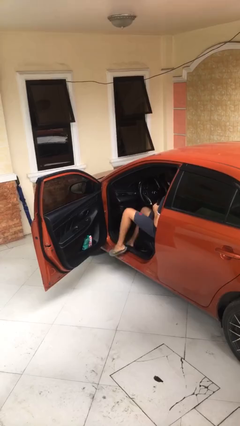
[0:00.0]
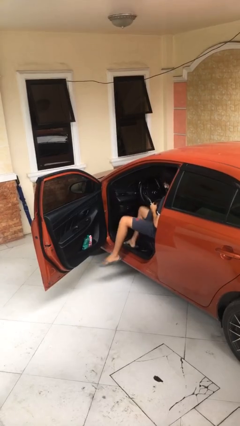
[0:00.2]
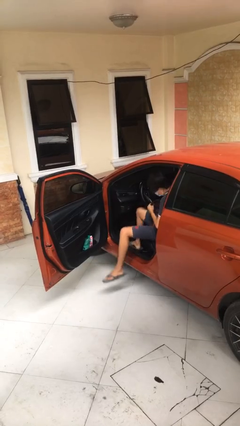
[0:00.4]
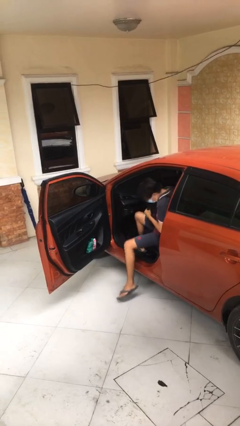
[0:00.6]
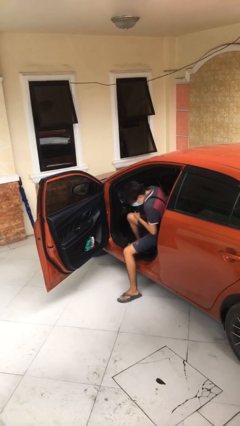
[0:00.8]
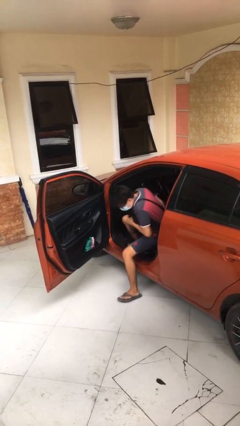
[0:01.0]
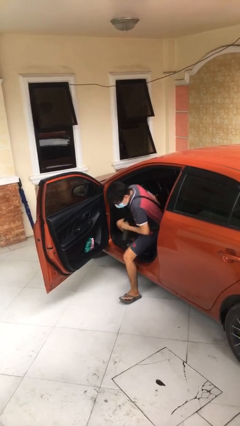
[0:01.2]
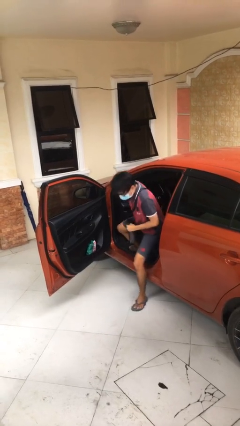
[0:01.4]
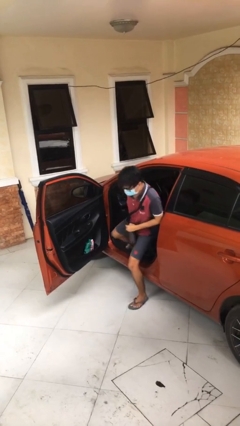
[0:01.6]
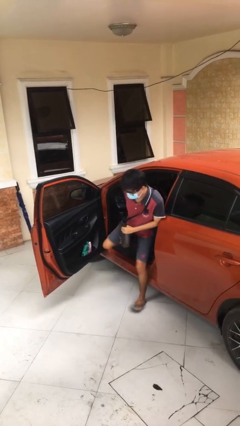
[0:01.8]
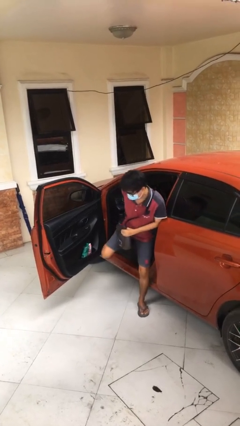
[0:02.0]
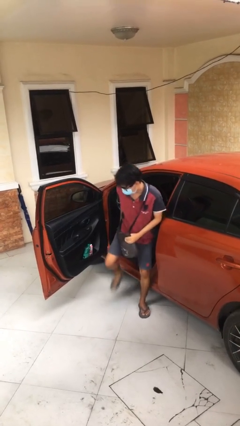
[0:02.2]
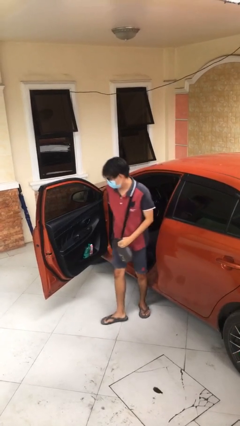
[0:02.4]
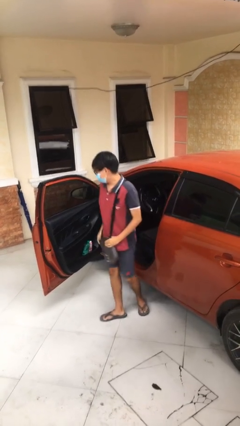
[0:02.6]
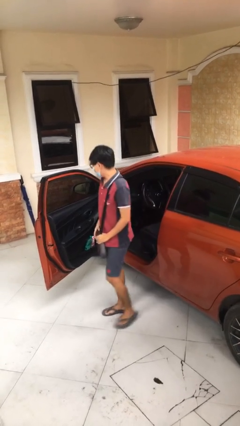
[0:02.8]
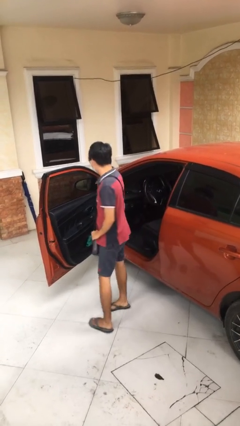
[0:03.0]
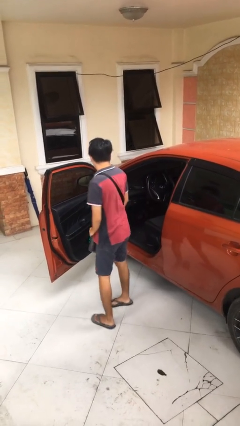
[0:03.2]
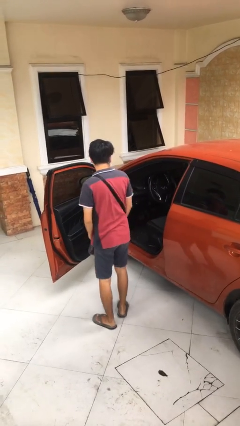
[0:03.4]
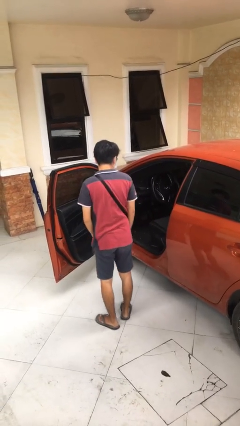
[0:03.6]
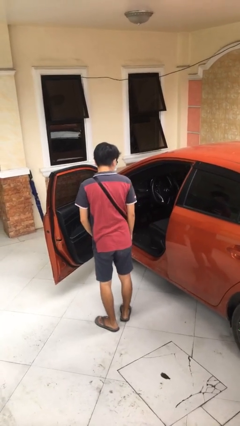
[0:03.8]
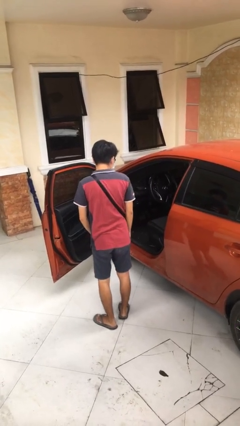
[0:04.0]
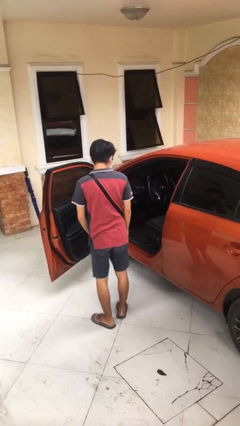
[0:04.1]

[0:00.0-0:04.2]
person exits car

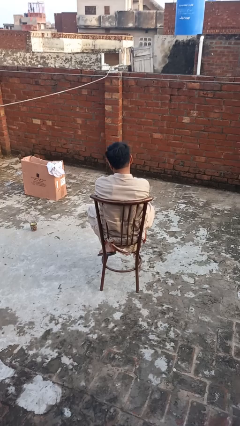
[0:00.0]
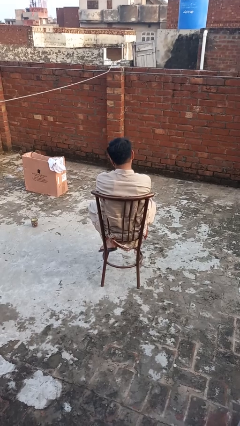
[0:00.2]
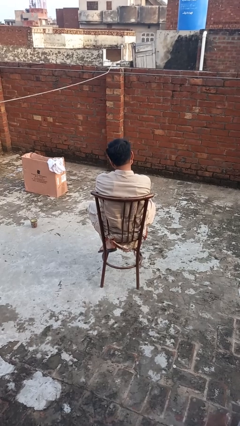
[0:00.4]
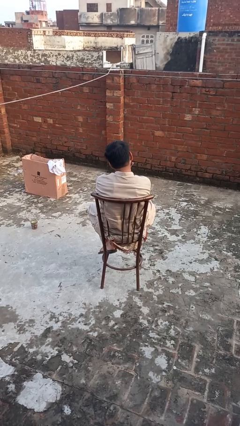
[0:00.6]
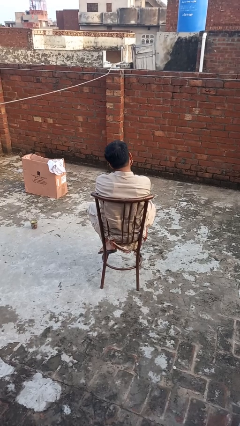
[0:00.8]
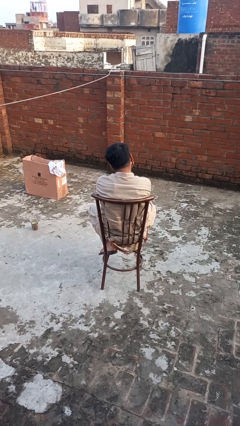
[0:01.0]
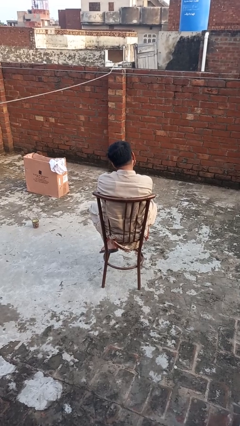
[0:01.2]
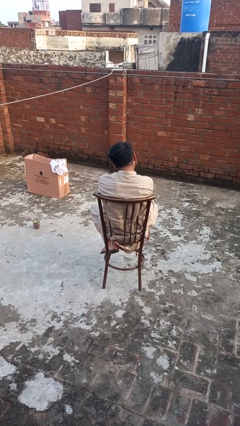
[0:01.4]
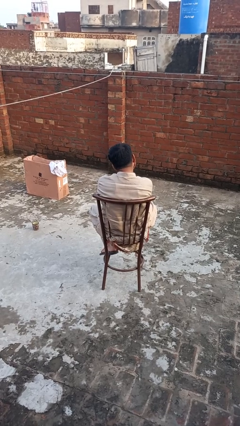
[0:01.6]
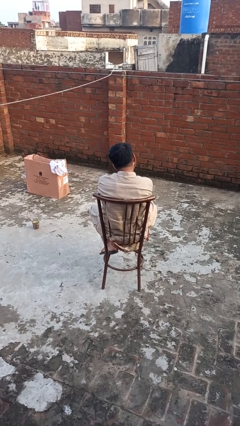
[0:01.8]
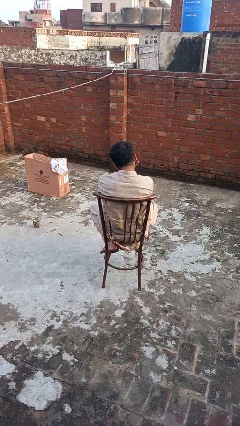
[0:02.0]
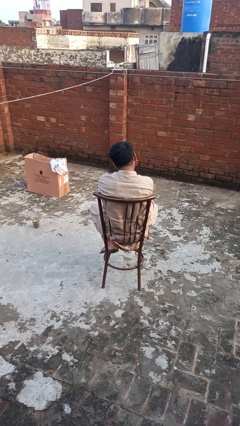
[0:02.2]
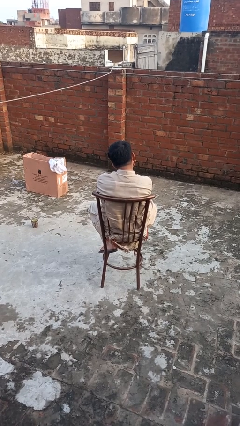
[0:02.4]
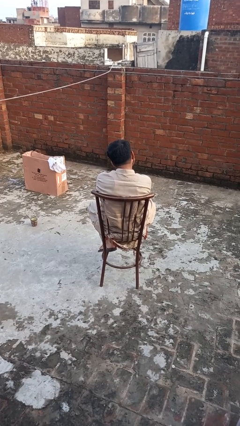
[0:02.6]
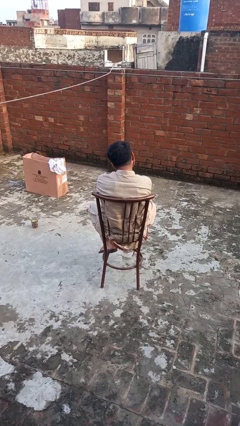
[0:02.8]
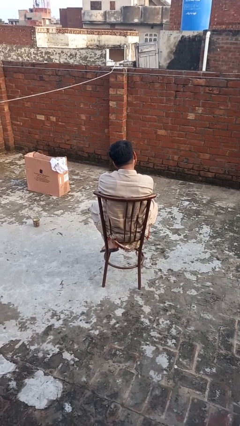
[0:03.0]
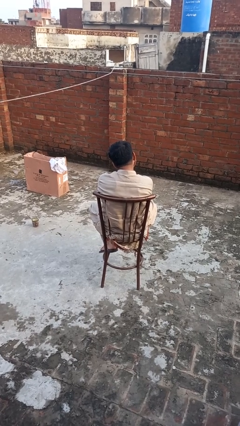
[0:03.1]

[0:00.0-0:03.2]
person strokes chin

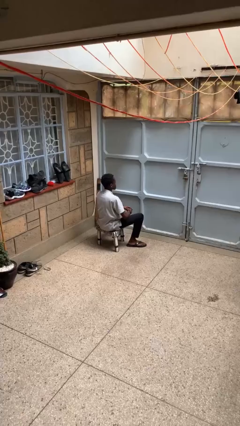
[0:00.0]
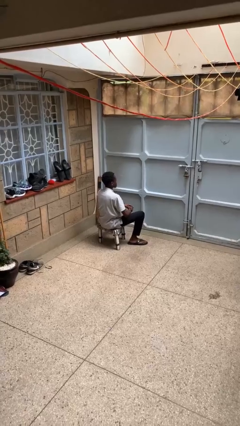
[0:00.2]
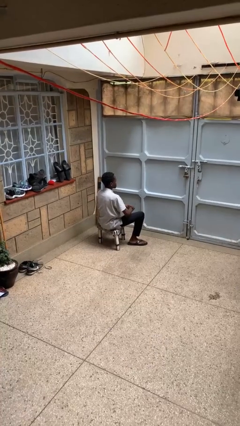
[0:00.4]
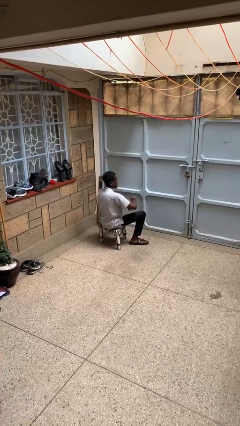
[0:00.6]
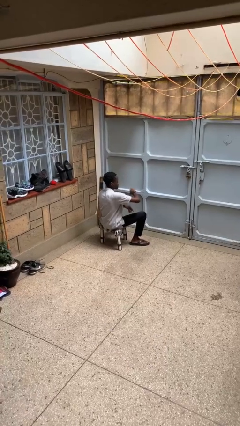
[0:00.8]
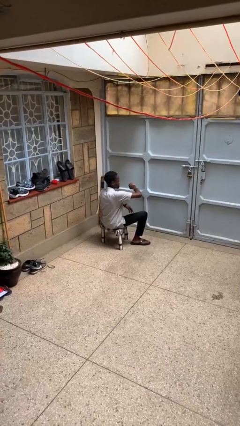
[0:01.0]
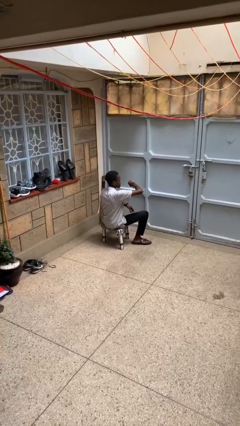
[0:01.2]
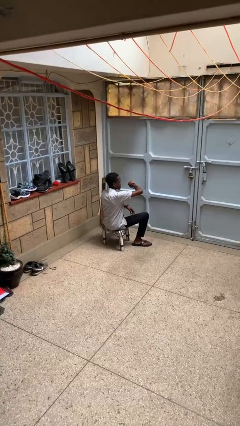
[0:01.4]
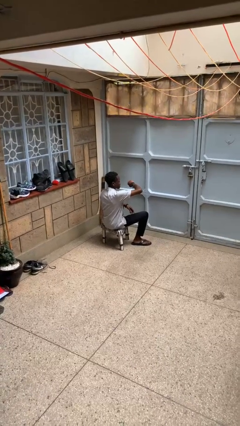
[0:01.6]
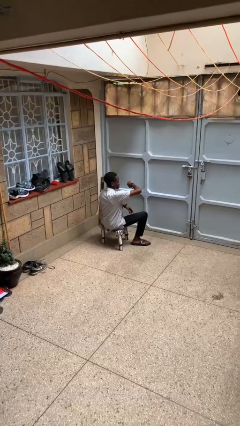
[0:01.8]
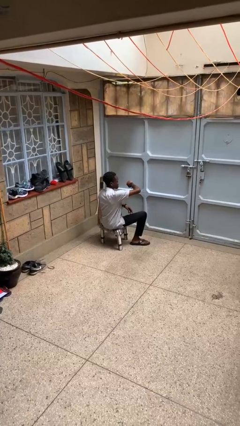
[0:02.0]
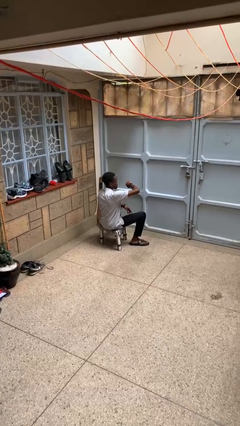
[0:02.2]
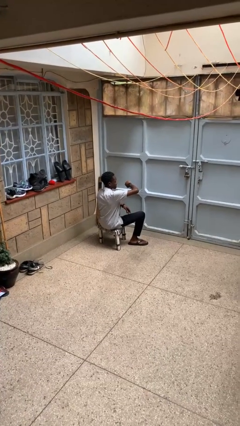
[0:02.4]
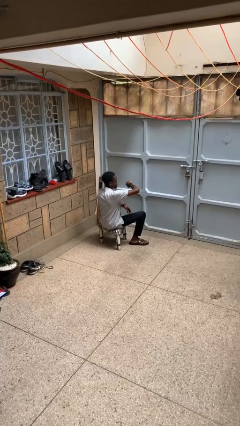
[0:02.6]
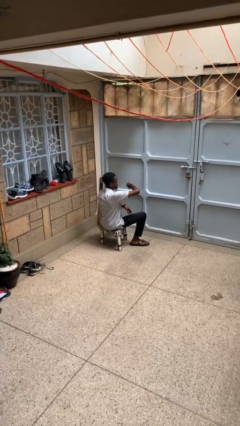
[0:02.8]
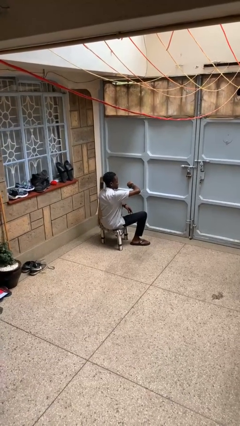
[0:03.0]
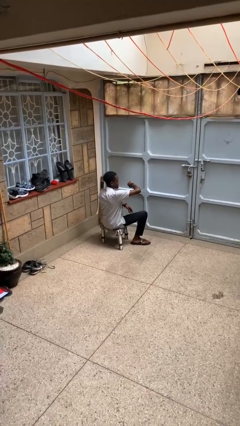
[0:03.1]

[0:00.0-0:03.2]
person looks at wristwatch

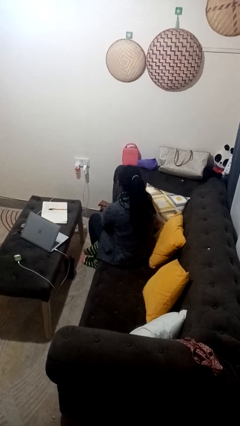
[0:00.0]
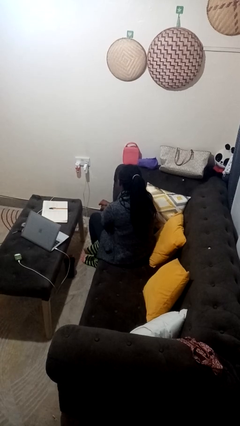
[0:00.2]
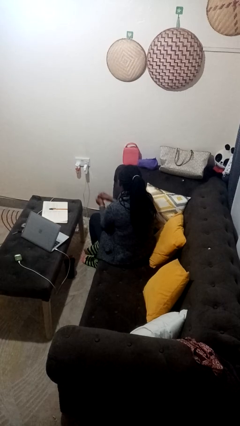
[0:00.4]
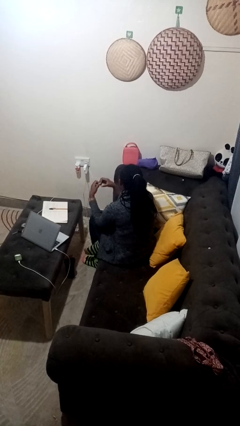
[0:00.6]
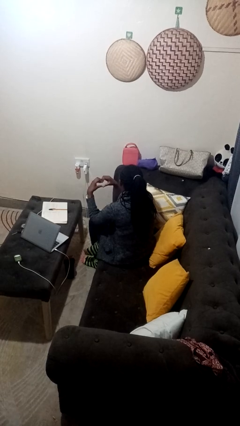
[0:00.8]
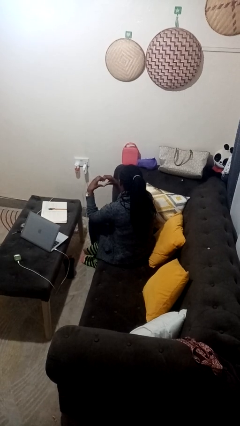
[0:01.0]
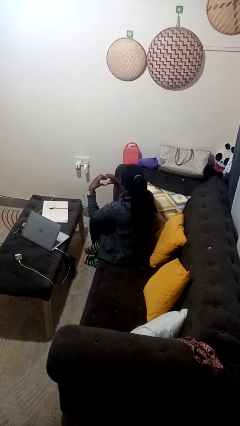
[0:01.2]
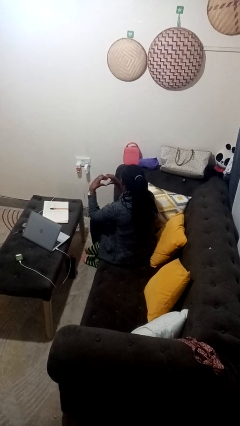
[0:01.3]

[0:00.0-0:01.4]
person gestures heart

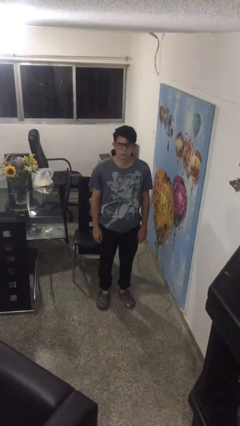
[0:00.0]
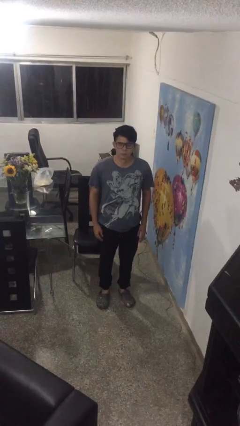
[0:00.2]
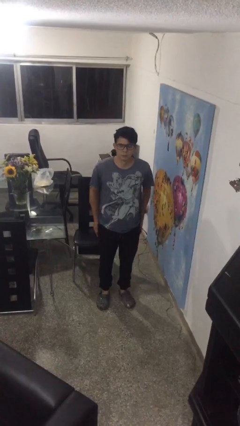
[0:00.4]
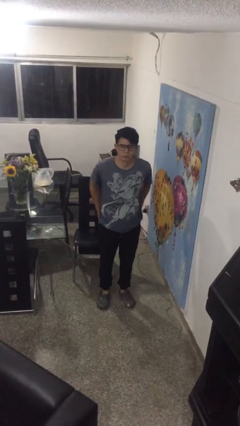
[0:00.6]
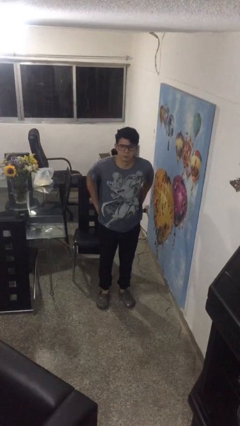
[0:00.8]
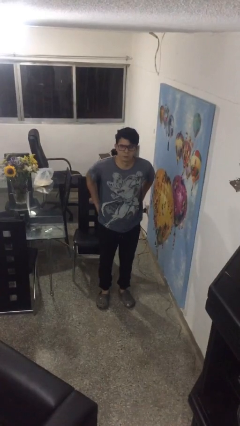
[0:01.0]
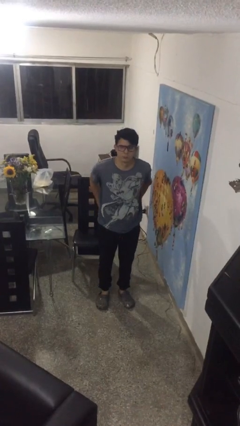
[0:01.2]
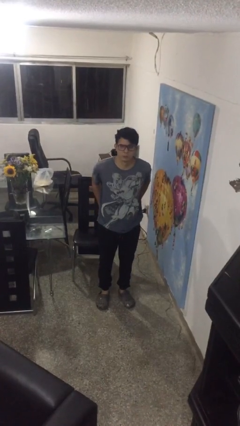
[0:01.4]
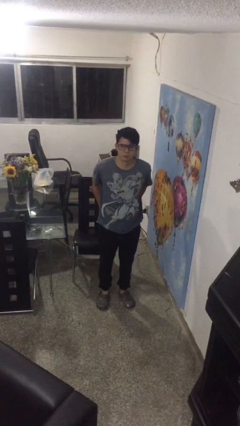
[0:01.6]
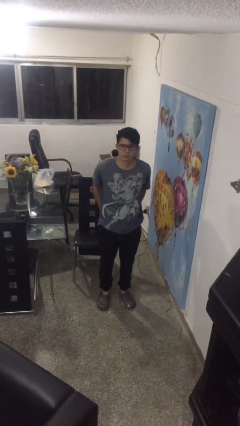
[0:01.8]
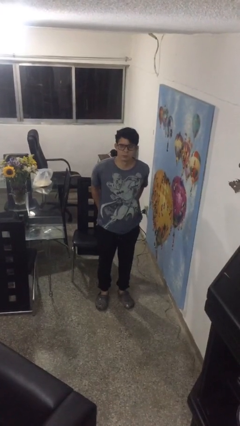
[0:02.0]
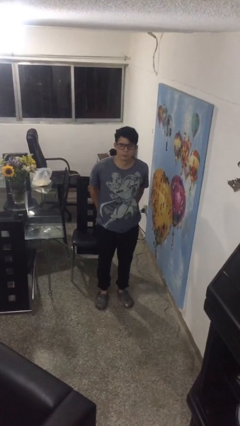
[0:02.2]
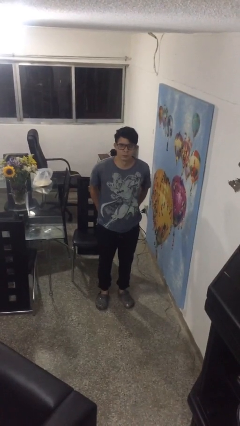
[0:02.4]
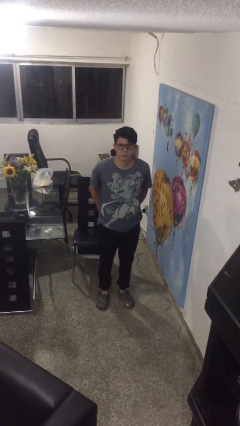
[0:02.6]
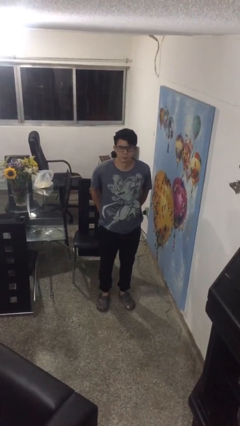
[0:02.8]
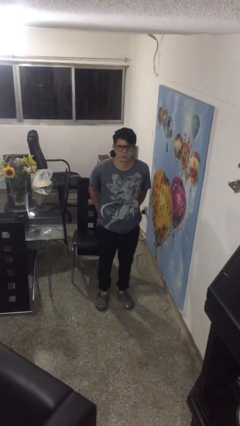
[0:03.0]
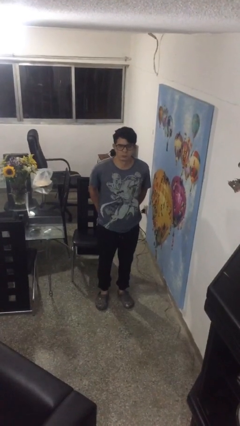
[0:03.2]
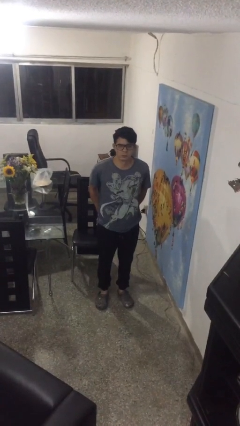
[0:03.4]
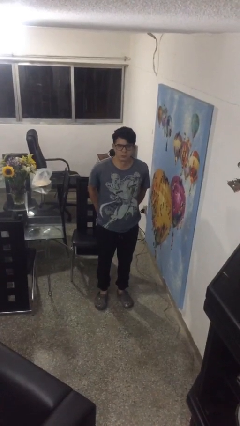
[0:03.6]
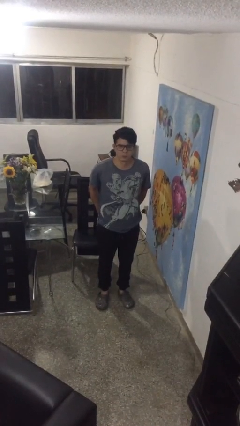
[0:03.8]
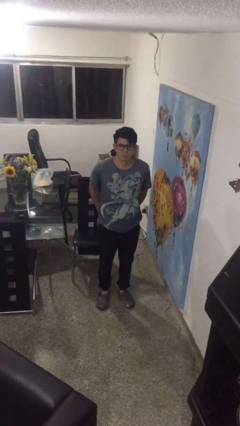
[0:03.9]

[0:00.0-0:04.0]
person puts hands in back pockets

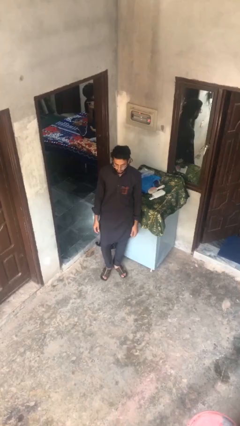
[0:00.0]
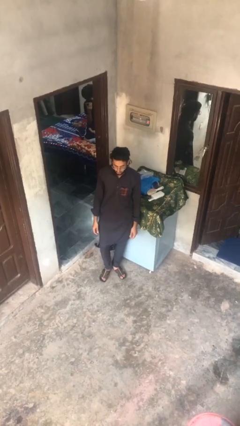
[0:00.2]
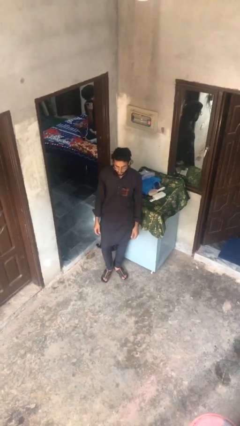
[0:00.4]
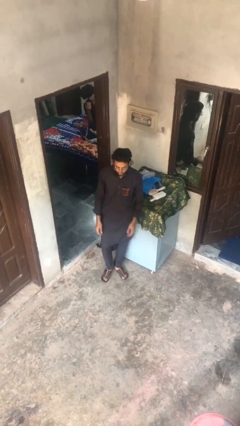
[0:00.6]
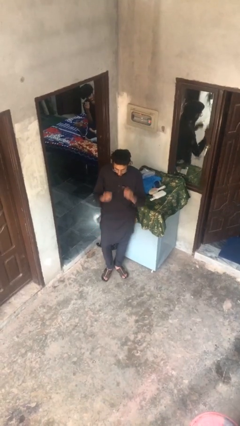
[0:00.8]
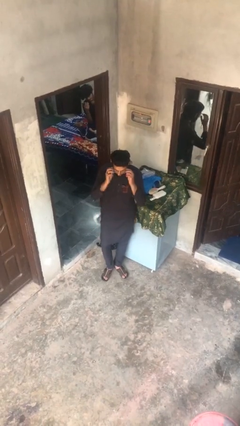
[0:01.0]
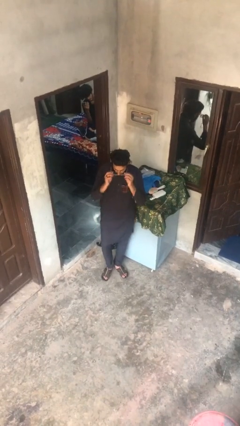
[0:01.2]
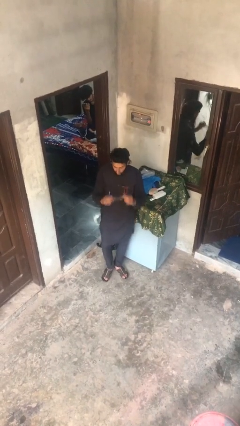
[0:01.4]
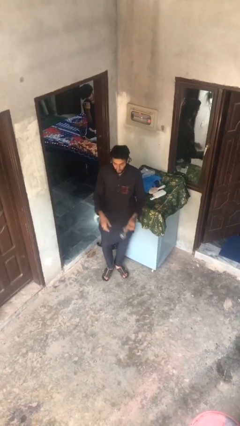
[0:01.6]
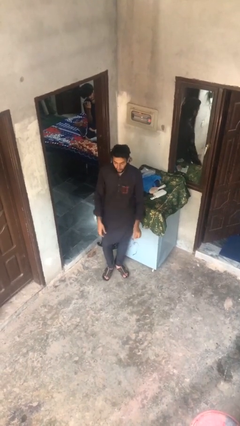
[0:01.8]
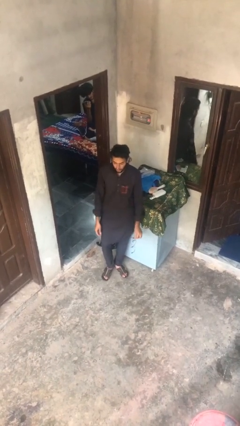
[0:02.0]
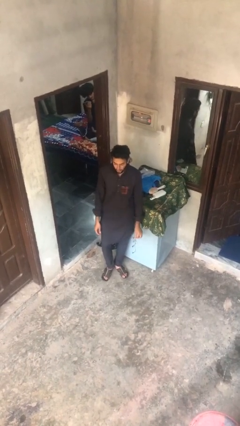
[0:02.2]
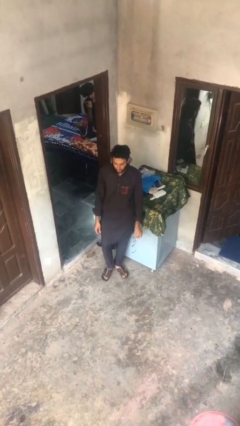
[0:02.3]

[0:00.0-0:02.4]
person takes off glasses
